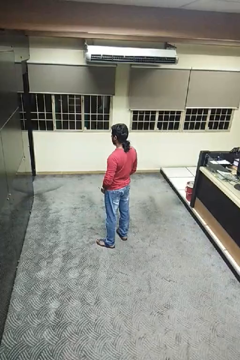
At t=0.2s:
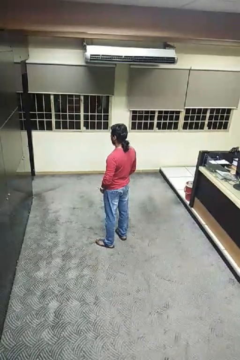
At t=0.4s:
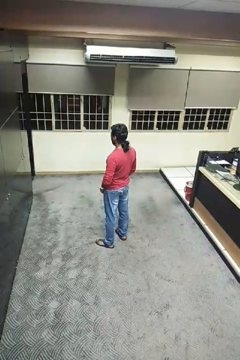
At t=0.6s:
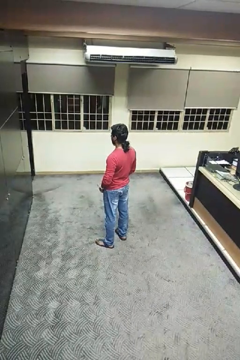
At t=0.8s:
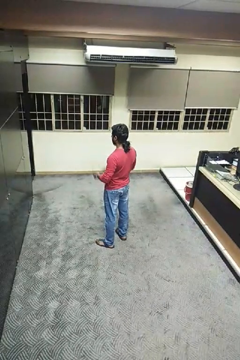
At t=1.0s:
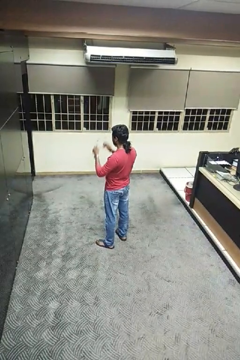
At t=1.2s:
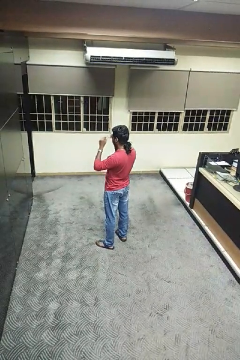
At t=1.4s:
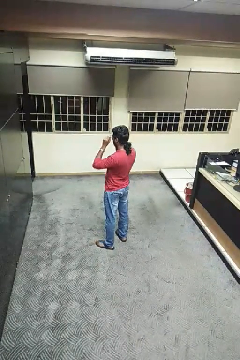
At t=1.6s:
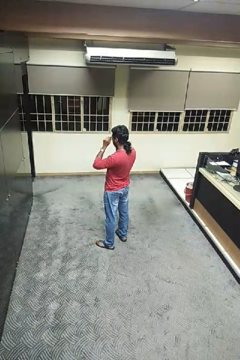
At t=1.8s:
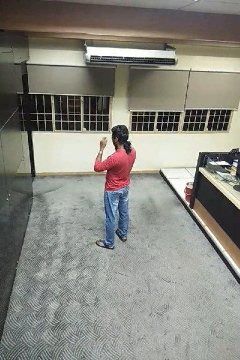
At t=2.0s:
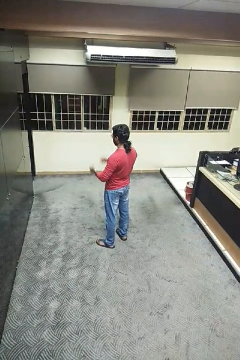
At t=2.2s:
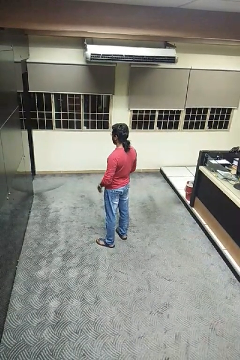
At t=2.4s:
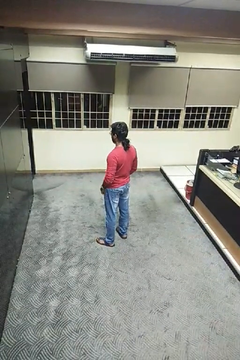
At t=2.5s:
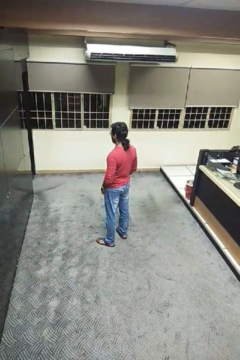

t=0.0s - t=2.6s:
person puts on glasses

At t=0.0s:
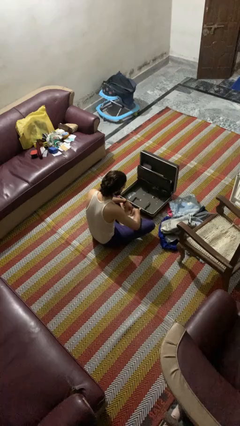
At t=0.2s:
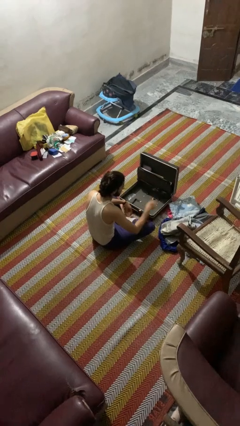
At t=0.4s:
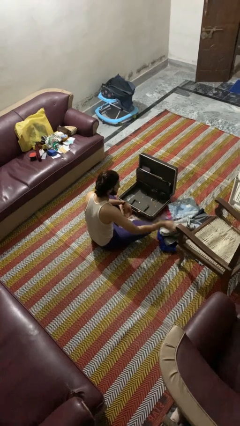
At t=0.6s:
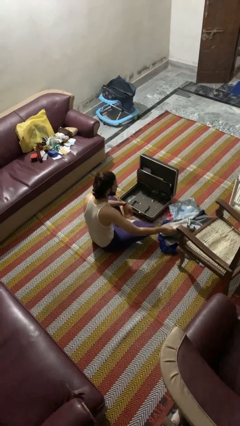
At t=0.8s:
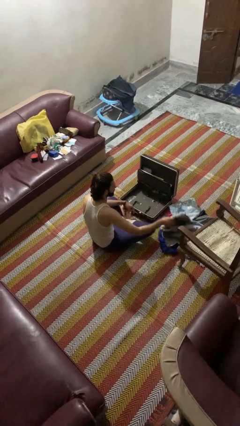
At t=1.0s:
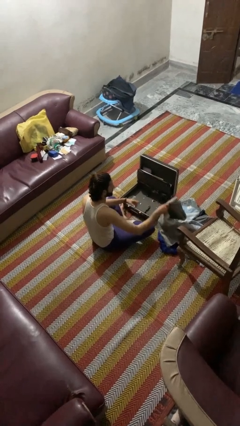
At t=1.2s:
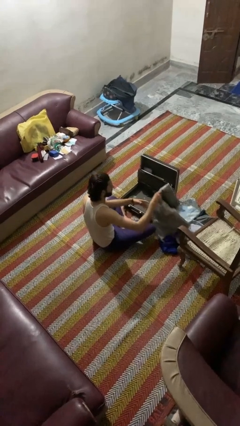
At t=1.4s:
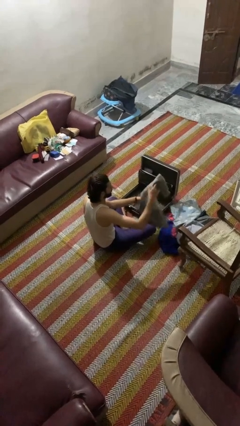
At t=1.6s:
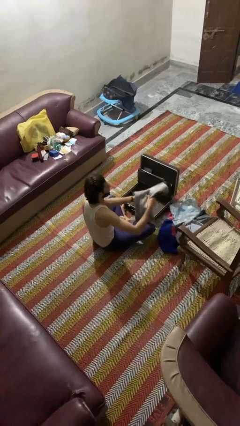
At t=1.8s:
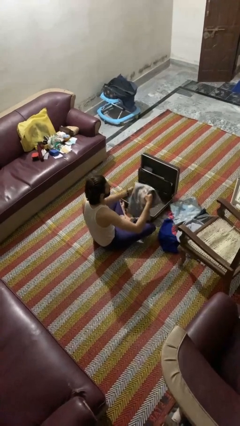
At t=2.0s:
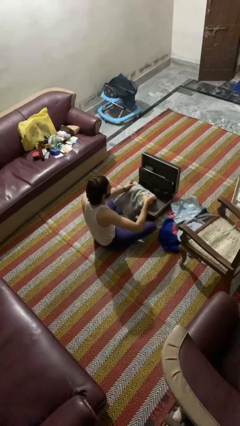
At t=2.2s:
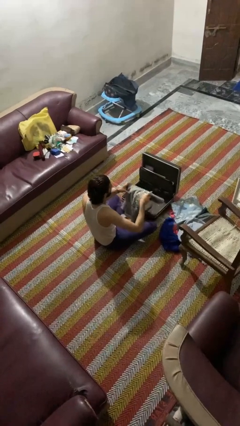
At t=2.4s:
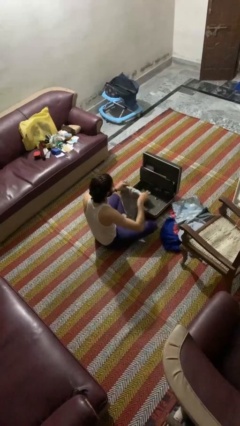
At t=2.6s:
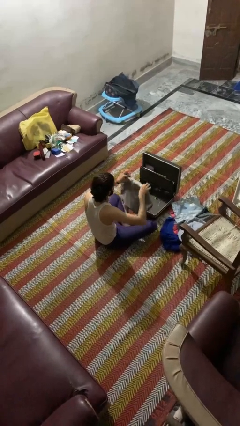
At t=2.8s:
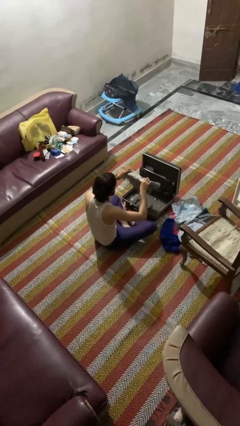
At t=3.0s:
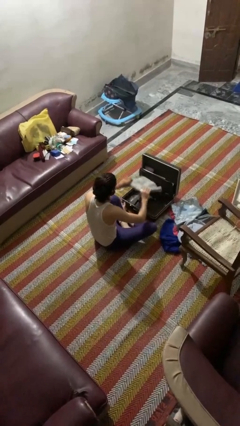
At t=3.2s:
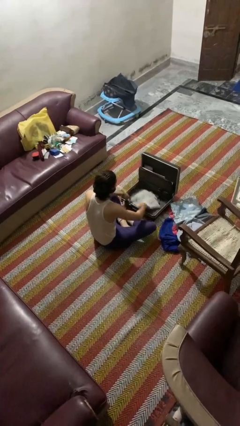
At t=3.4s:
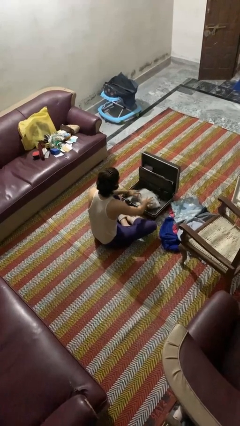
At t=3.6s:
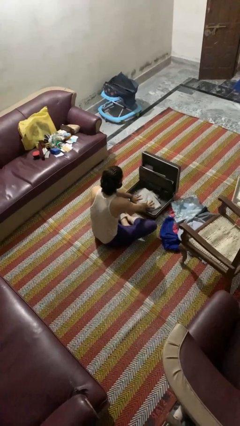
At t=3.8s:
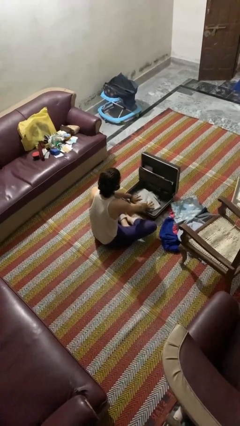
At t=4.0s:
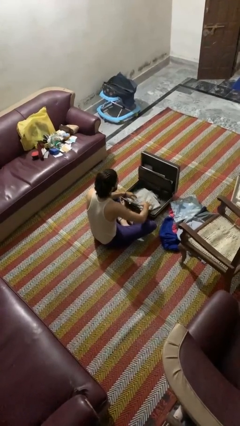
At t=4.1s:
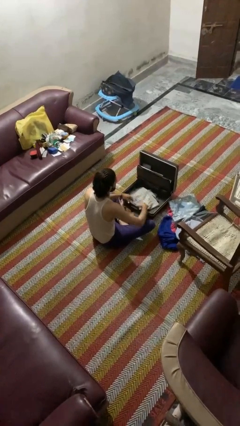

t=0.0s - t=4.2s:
person loads clothes into suitcase

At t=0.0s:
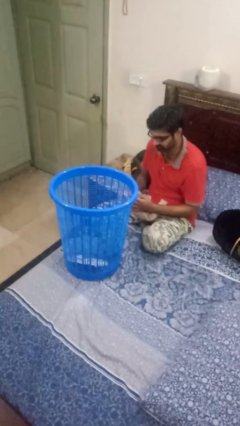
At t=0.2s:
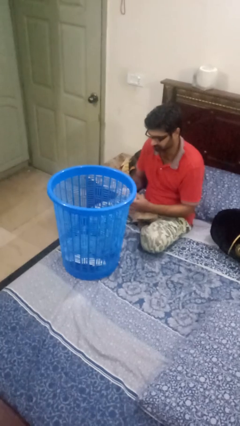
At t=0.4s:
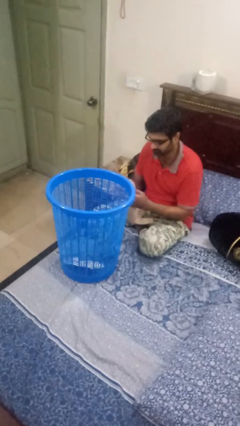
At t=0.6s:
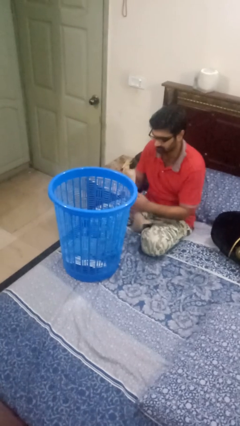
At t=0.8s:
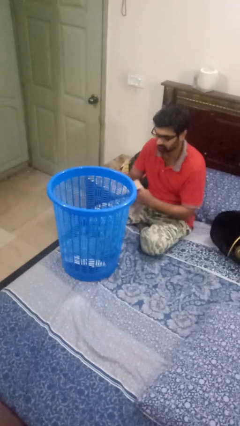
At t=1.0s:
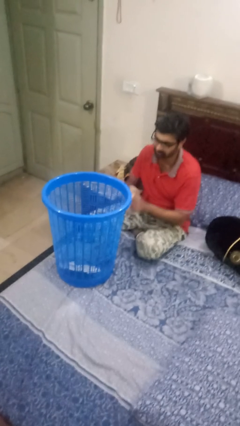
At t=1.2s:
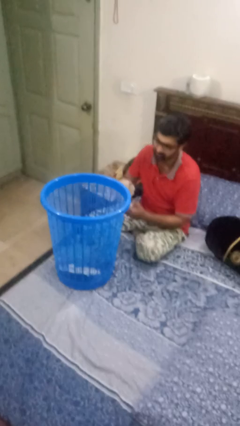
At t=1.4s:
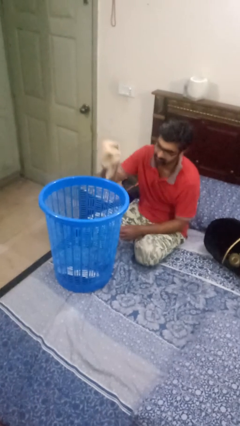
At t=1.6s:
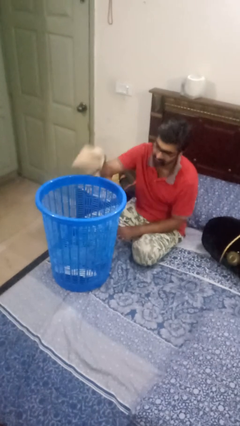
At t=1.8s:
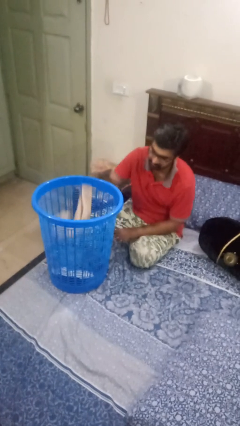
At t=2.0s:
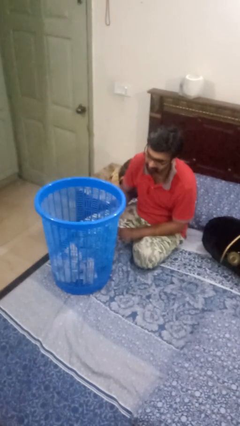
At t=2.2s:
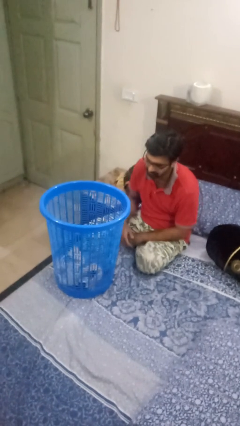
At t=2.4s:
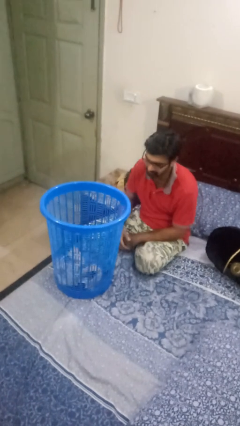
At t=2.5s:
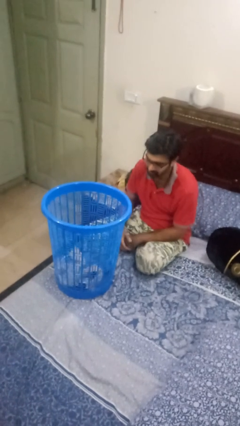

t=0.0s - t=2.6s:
person puts object into basket

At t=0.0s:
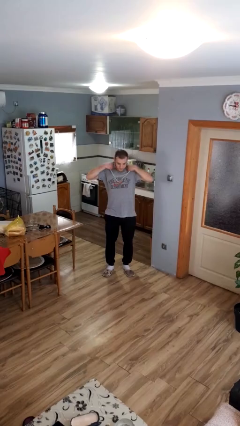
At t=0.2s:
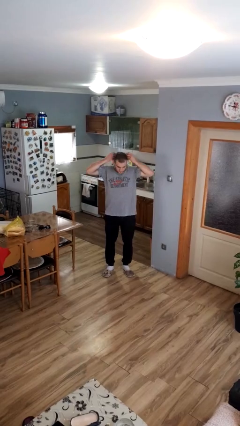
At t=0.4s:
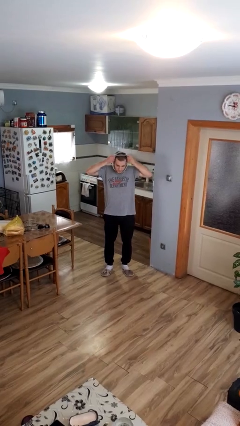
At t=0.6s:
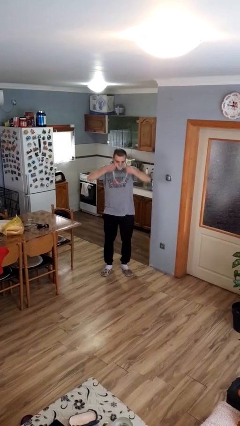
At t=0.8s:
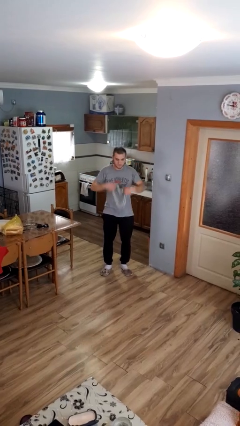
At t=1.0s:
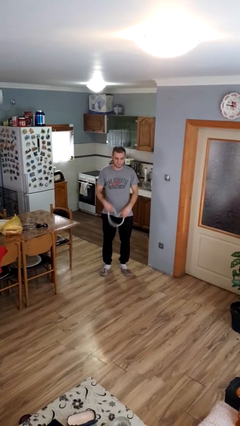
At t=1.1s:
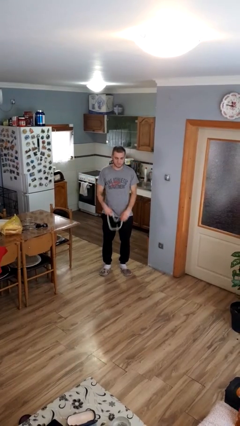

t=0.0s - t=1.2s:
person takes off necklace

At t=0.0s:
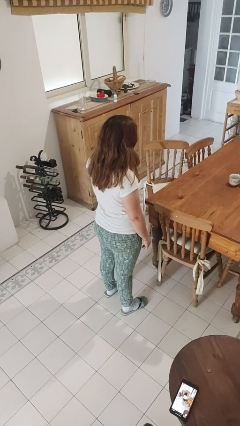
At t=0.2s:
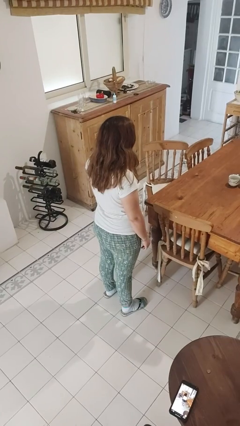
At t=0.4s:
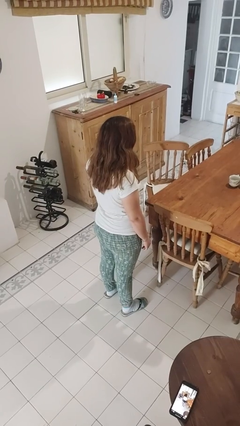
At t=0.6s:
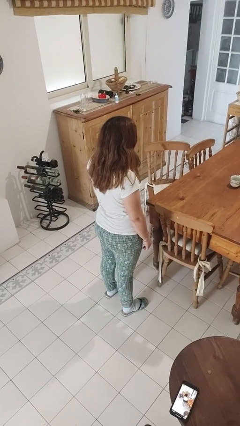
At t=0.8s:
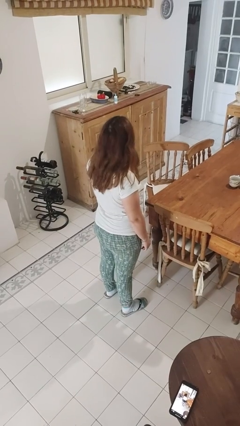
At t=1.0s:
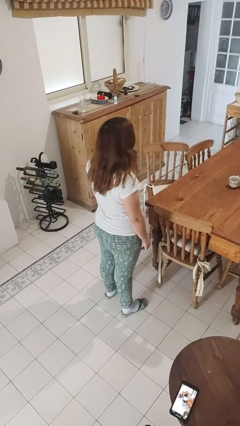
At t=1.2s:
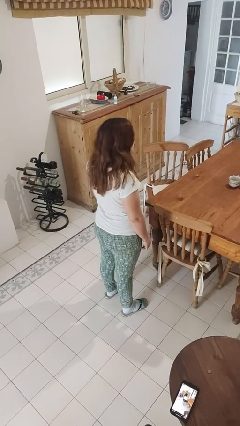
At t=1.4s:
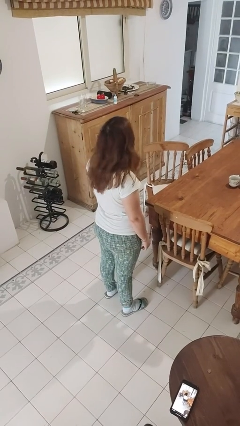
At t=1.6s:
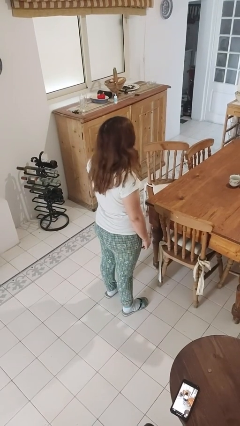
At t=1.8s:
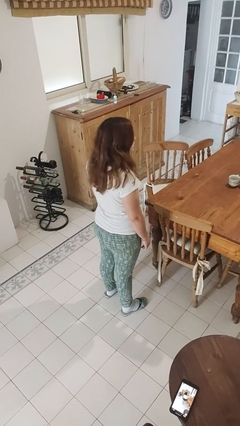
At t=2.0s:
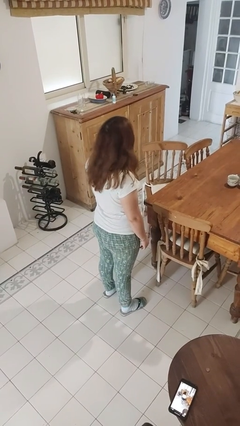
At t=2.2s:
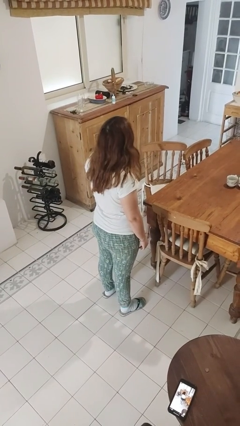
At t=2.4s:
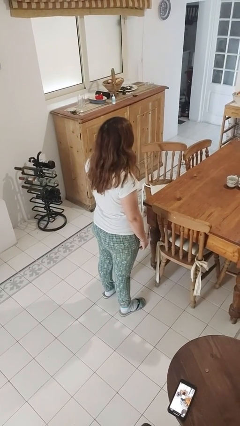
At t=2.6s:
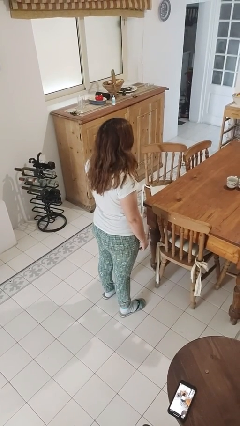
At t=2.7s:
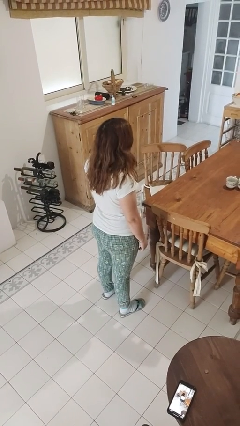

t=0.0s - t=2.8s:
person shakes head

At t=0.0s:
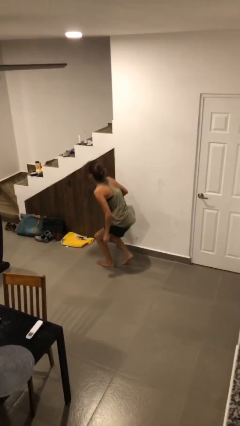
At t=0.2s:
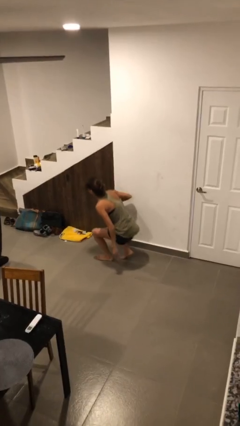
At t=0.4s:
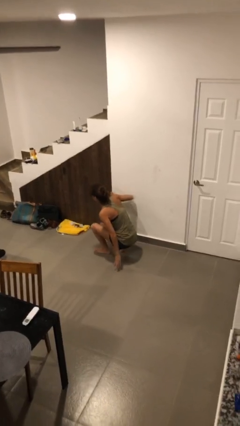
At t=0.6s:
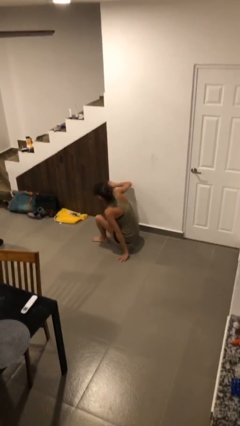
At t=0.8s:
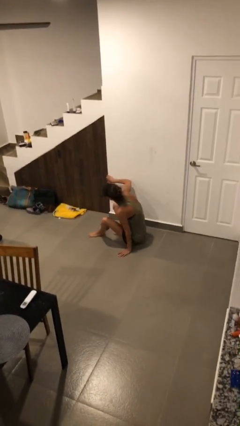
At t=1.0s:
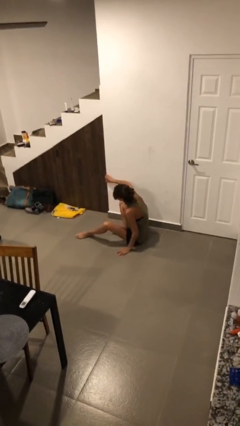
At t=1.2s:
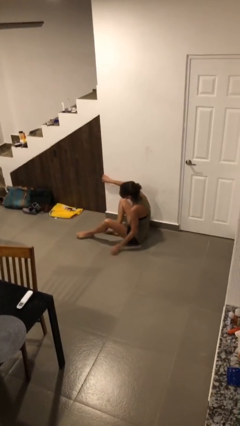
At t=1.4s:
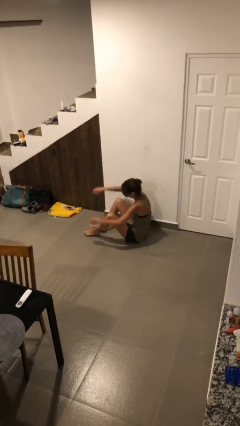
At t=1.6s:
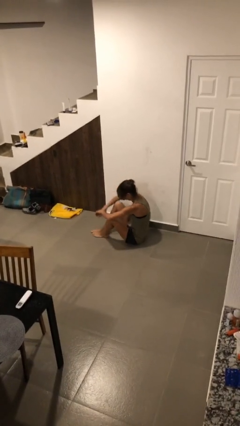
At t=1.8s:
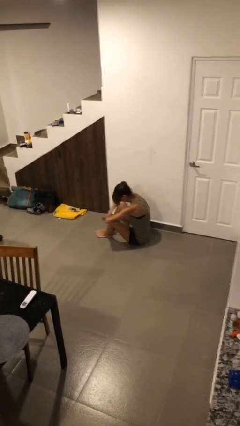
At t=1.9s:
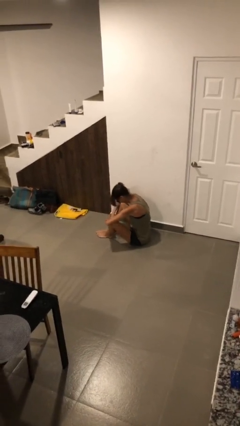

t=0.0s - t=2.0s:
person sits down

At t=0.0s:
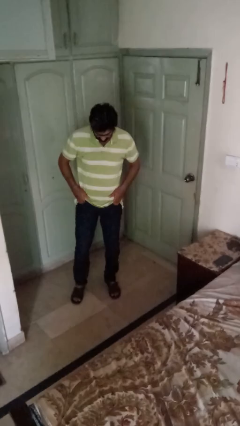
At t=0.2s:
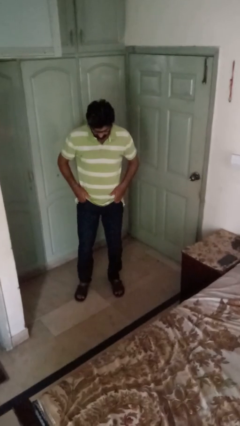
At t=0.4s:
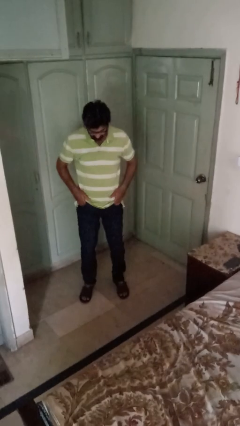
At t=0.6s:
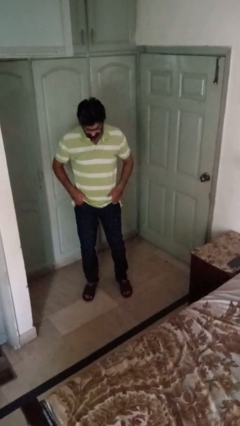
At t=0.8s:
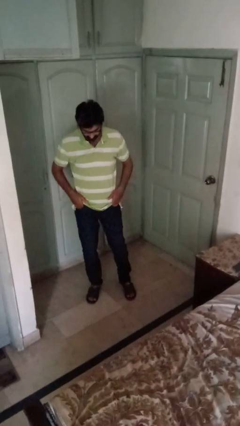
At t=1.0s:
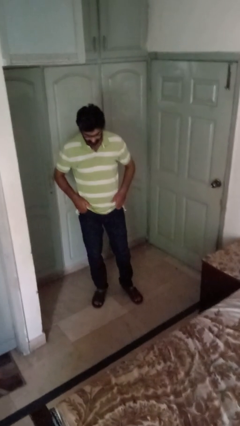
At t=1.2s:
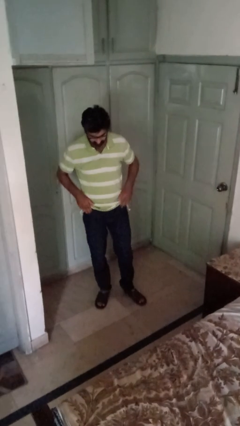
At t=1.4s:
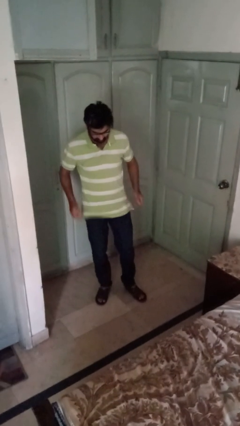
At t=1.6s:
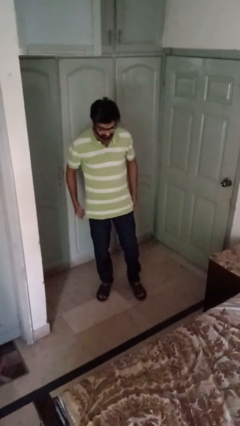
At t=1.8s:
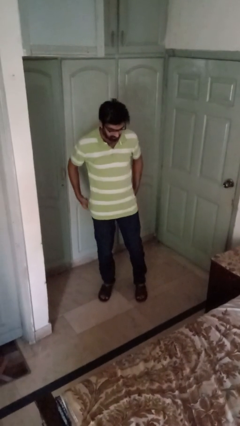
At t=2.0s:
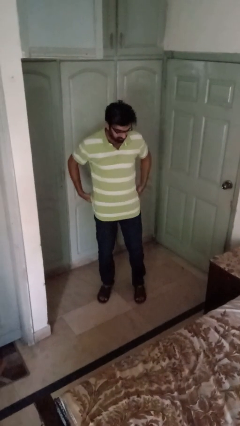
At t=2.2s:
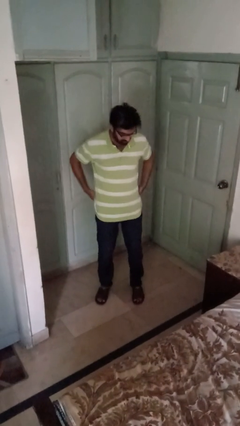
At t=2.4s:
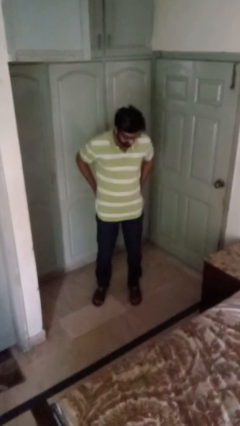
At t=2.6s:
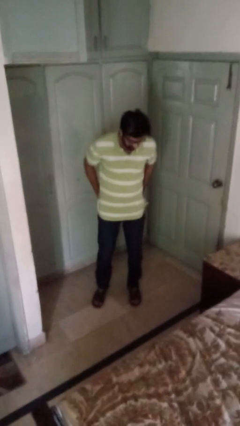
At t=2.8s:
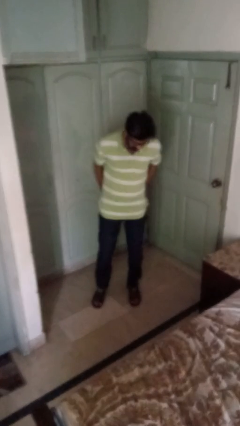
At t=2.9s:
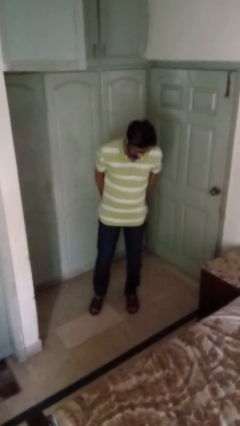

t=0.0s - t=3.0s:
person puts hands in back pockets
